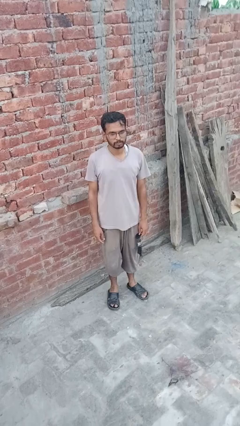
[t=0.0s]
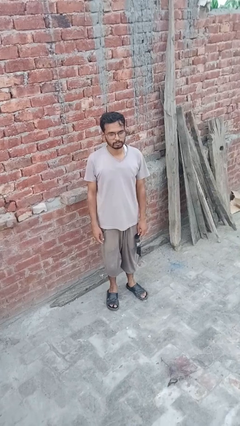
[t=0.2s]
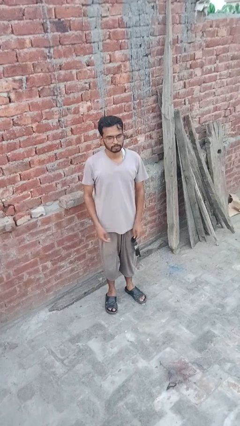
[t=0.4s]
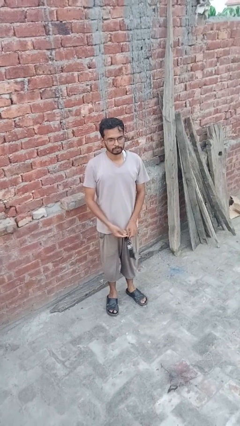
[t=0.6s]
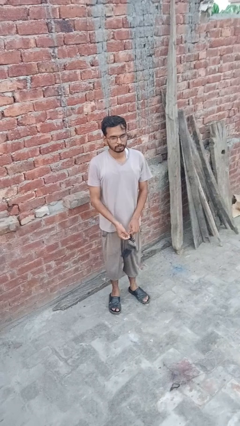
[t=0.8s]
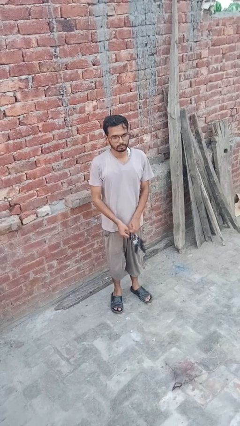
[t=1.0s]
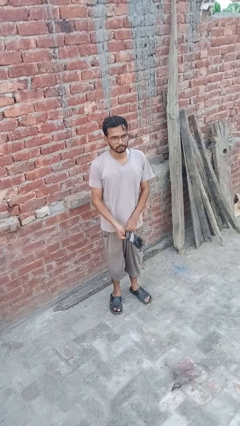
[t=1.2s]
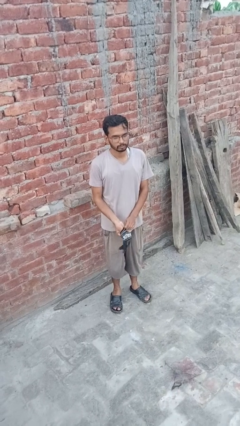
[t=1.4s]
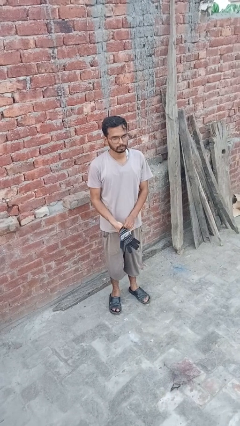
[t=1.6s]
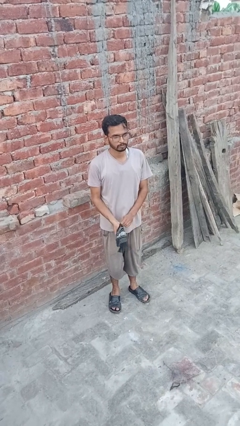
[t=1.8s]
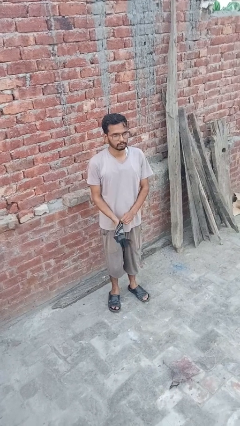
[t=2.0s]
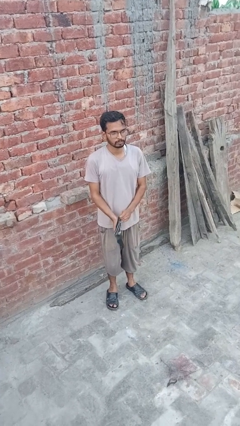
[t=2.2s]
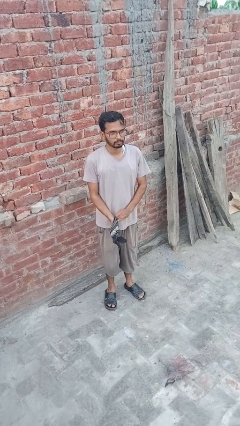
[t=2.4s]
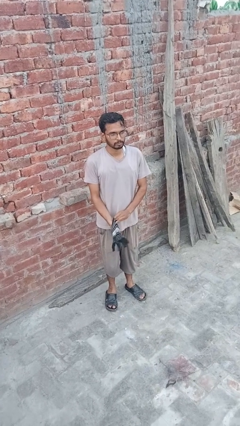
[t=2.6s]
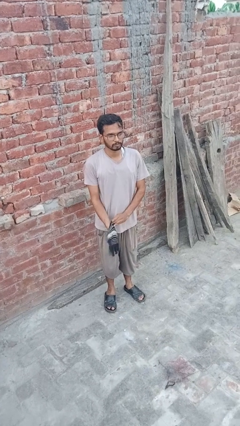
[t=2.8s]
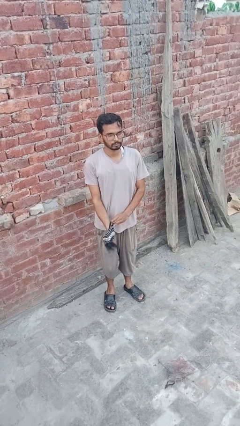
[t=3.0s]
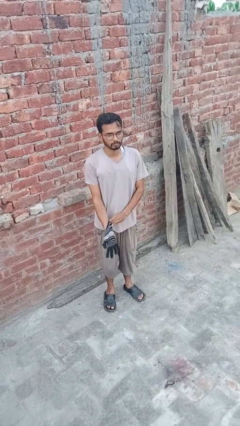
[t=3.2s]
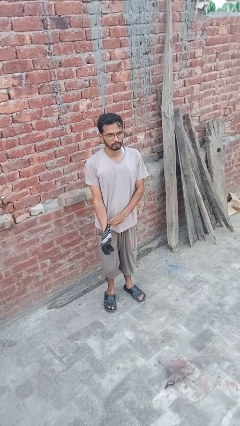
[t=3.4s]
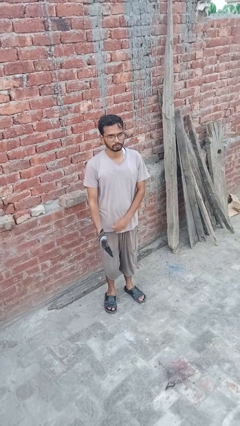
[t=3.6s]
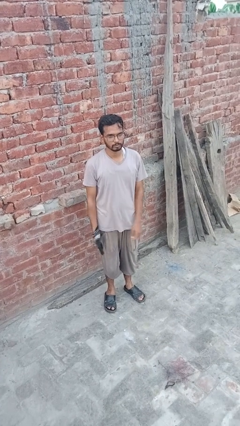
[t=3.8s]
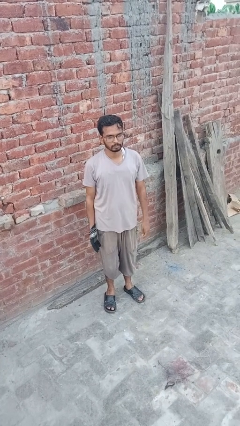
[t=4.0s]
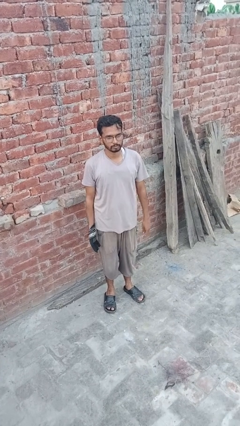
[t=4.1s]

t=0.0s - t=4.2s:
person puts on gloves

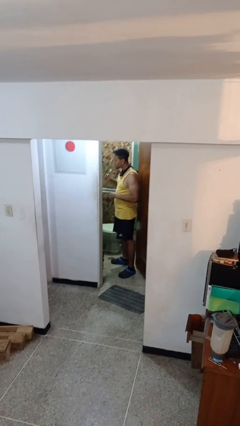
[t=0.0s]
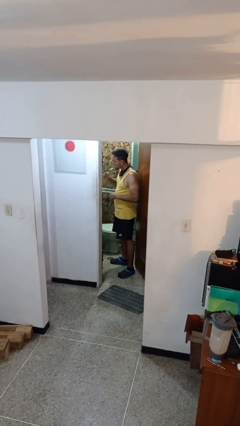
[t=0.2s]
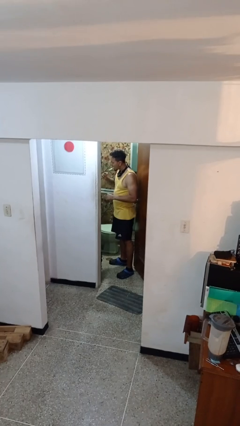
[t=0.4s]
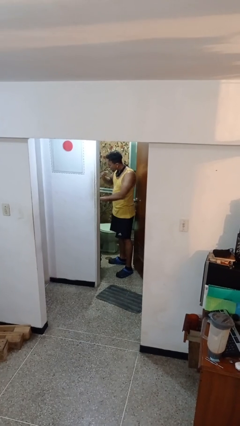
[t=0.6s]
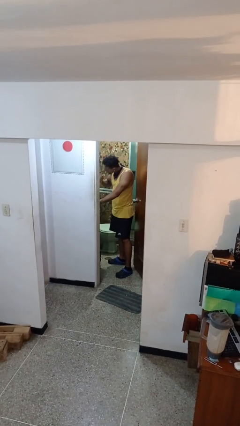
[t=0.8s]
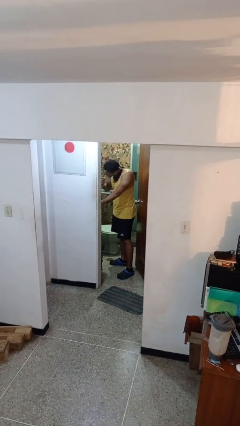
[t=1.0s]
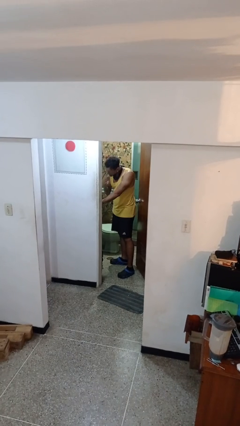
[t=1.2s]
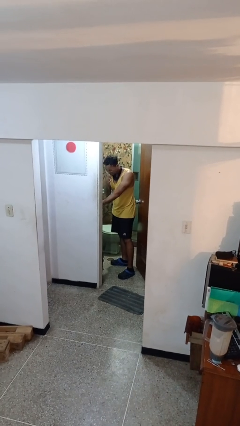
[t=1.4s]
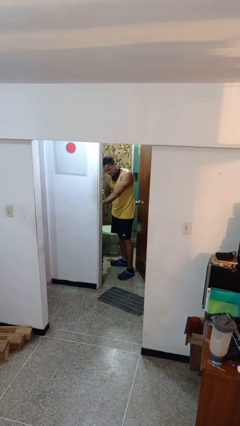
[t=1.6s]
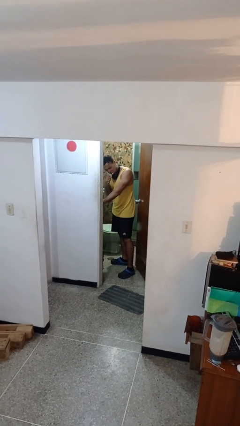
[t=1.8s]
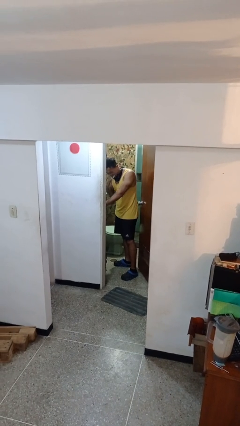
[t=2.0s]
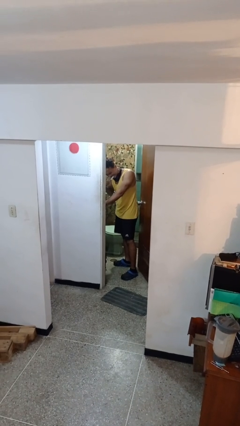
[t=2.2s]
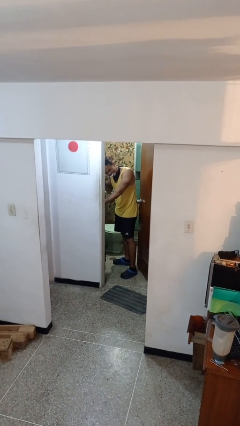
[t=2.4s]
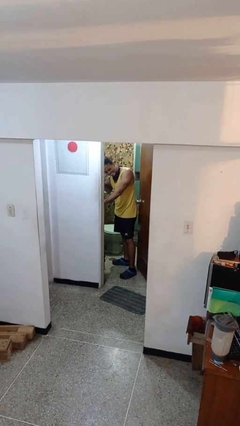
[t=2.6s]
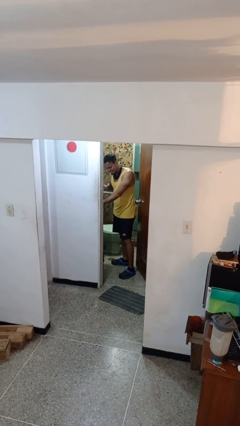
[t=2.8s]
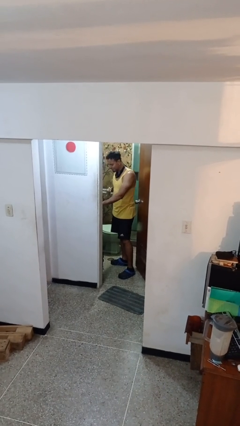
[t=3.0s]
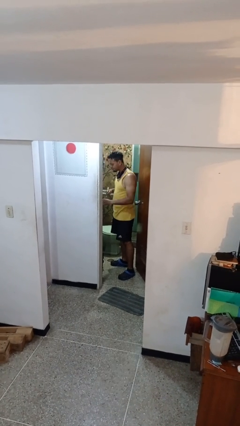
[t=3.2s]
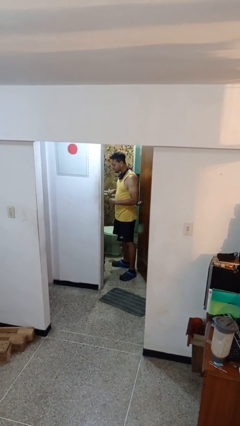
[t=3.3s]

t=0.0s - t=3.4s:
person brushes teeth

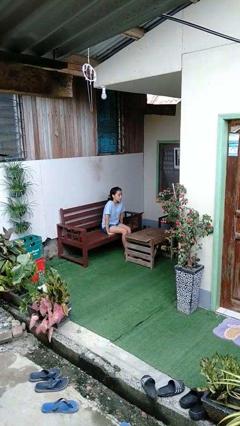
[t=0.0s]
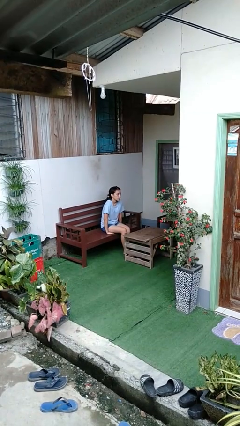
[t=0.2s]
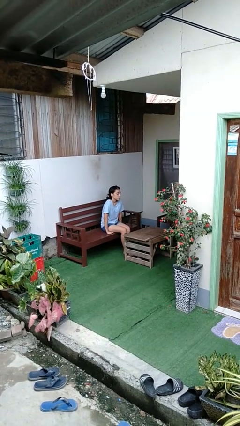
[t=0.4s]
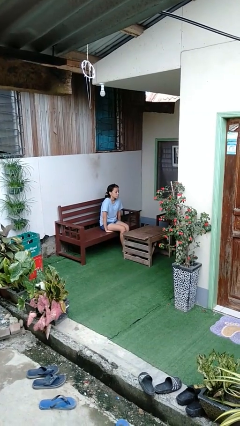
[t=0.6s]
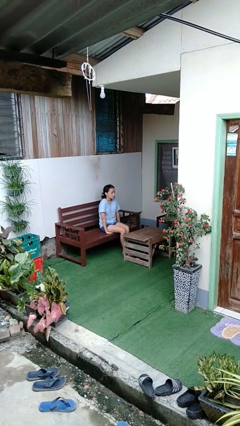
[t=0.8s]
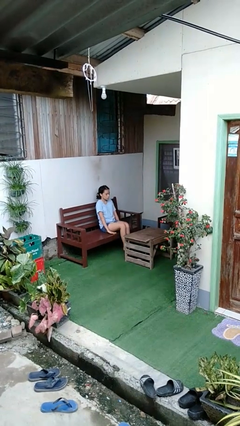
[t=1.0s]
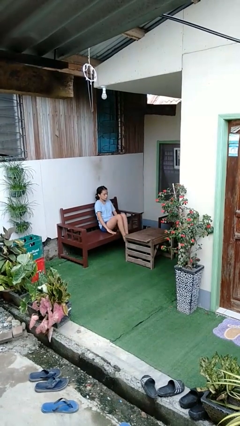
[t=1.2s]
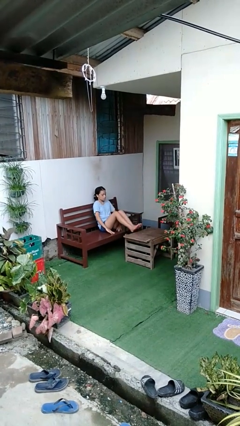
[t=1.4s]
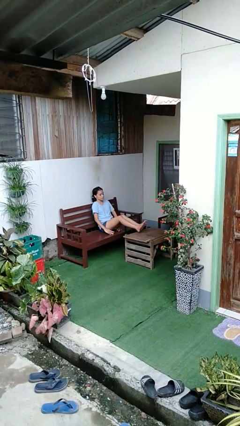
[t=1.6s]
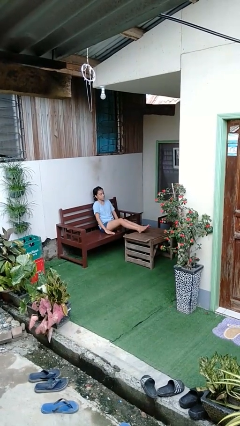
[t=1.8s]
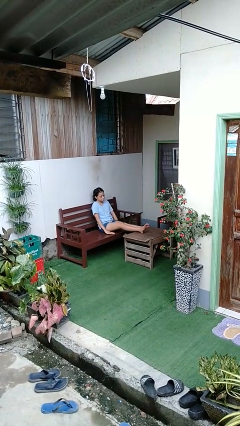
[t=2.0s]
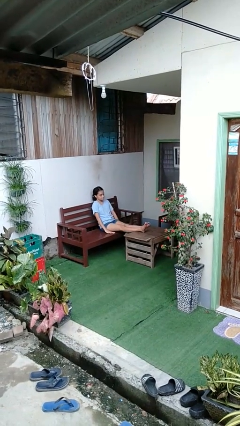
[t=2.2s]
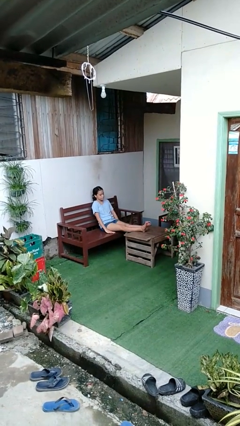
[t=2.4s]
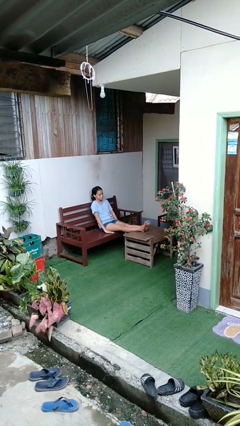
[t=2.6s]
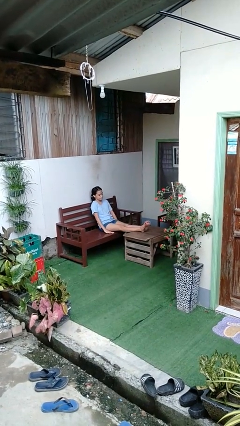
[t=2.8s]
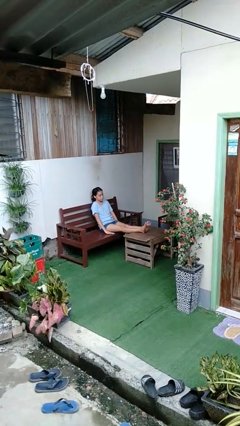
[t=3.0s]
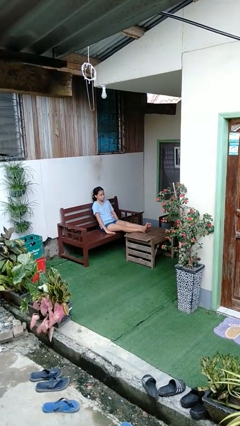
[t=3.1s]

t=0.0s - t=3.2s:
person puts feet up

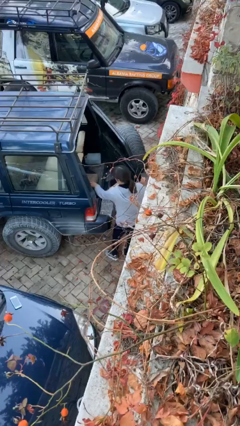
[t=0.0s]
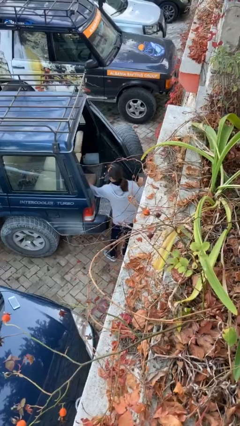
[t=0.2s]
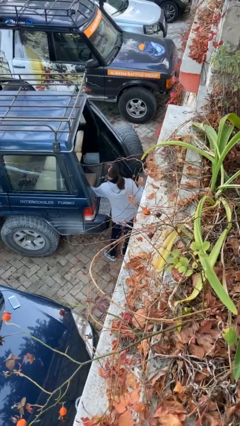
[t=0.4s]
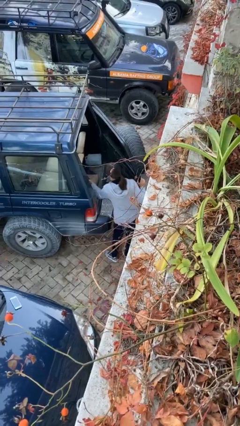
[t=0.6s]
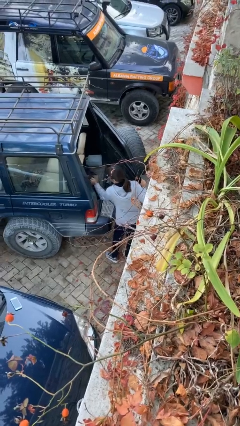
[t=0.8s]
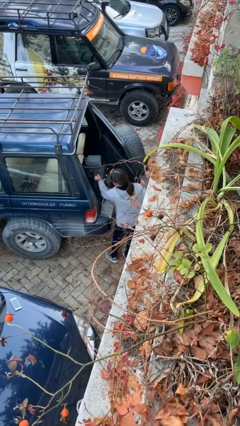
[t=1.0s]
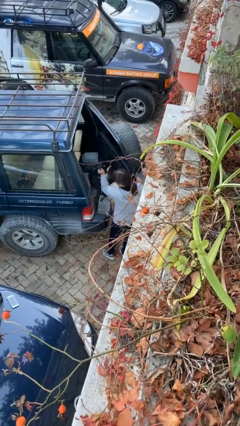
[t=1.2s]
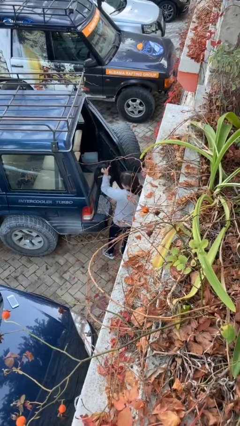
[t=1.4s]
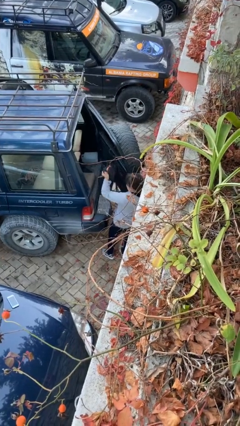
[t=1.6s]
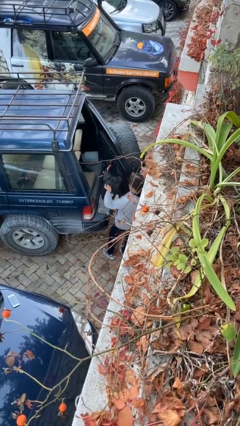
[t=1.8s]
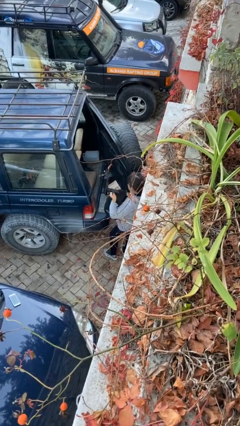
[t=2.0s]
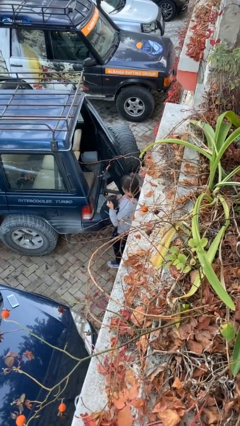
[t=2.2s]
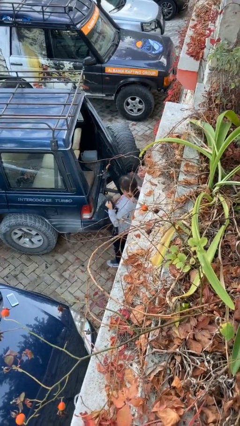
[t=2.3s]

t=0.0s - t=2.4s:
person unloads car

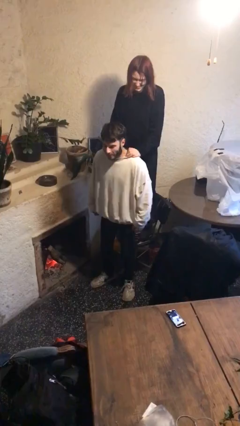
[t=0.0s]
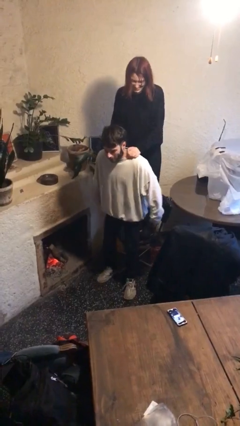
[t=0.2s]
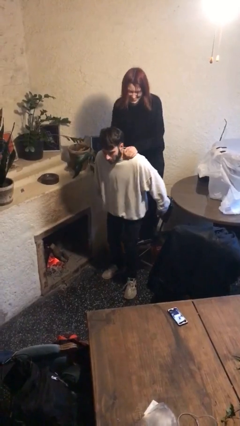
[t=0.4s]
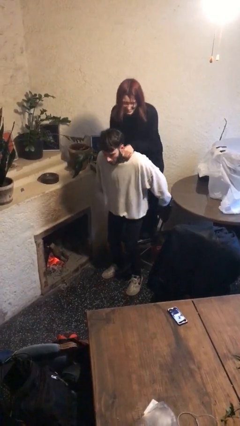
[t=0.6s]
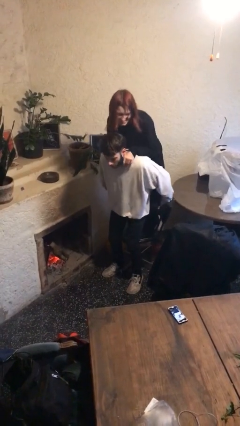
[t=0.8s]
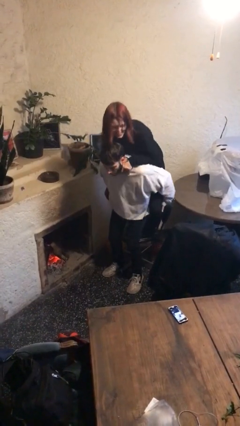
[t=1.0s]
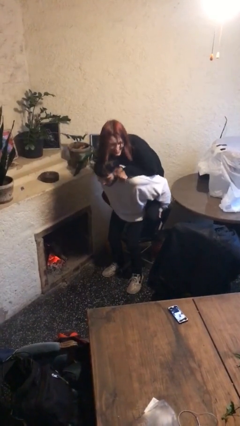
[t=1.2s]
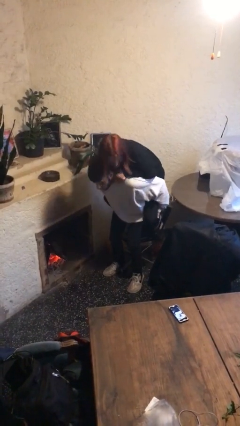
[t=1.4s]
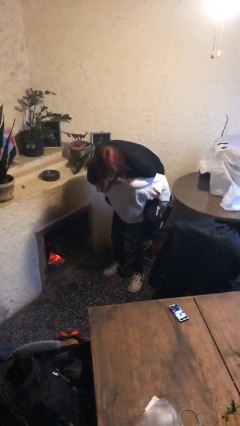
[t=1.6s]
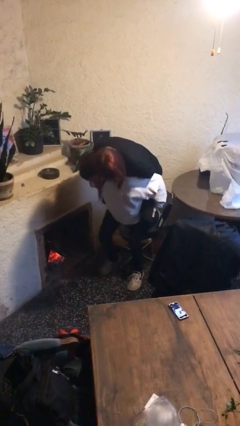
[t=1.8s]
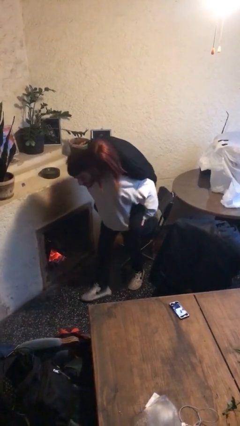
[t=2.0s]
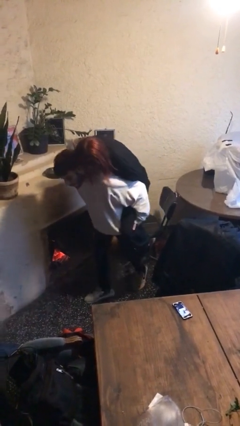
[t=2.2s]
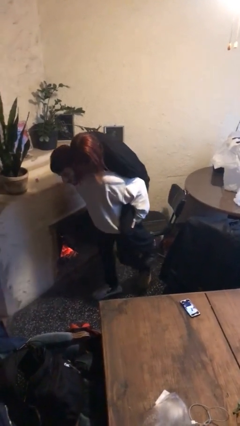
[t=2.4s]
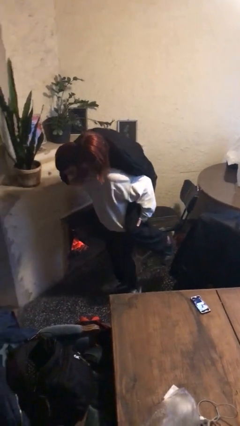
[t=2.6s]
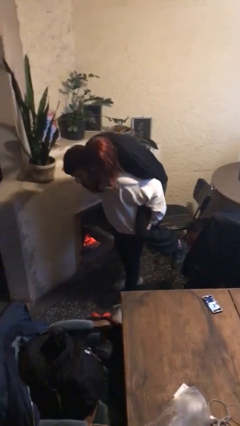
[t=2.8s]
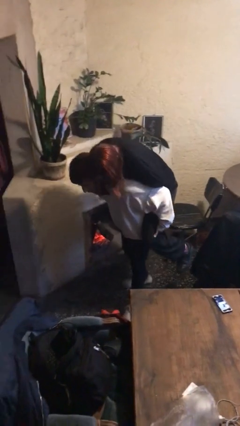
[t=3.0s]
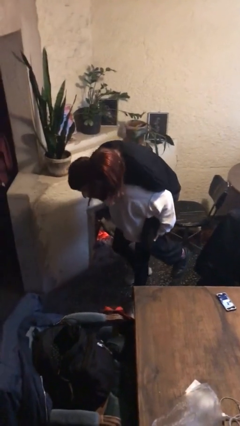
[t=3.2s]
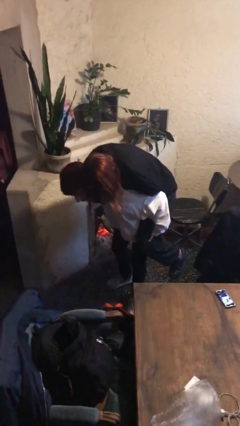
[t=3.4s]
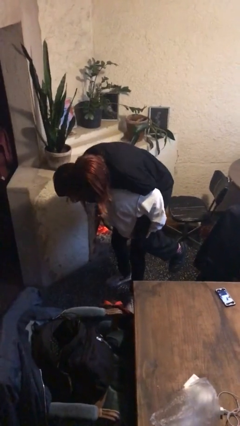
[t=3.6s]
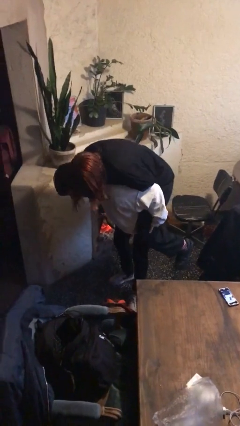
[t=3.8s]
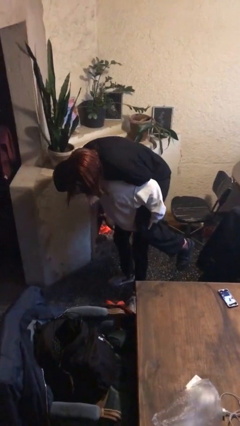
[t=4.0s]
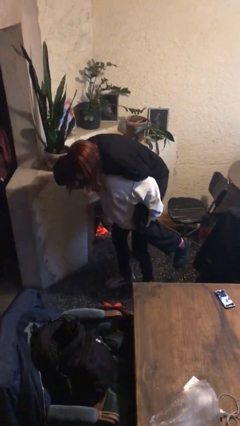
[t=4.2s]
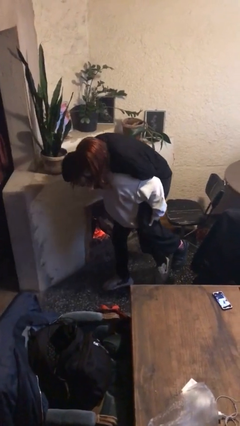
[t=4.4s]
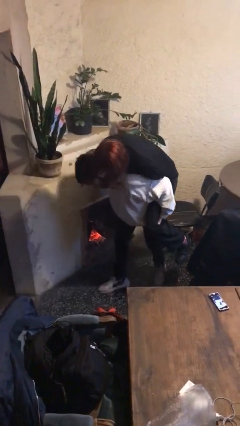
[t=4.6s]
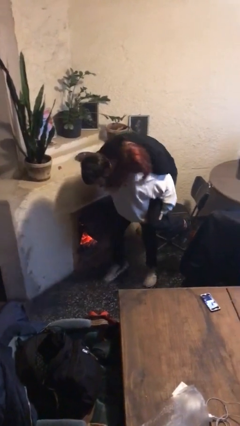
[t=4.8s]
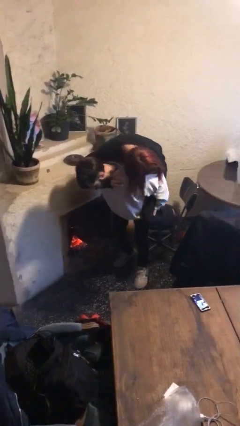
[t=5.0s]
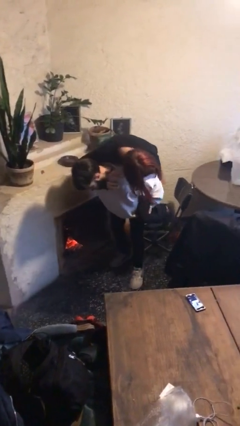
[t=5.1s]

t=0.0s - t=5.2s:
person carries person over shoulder
